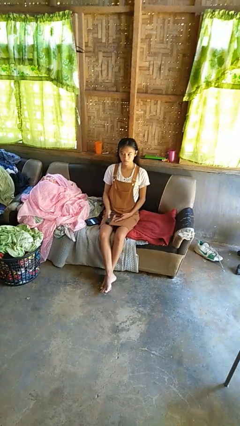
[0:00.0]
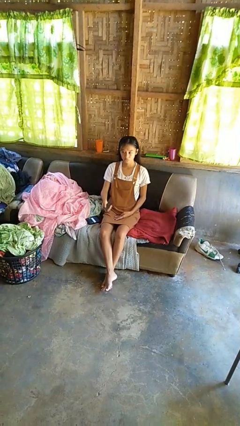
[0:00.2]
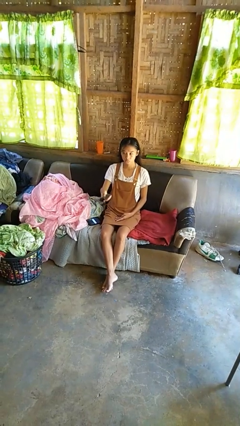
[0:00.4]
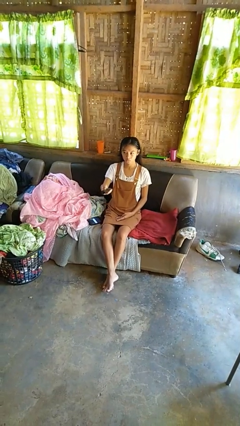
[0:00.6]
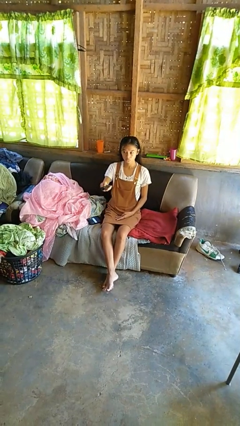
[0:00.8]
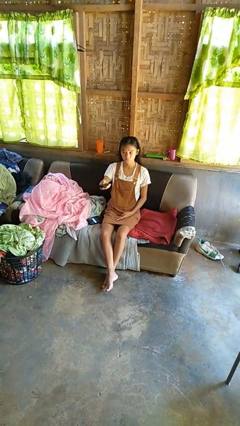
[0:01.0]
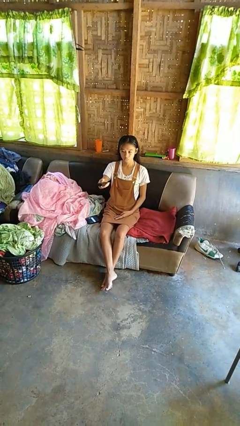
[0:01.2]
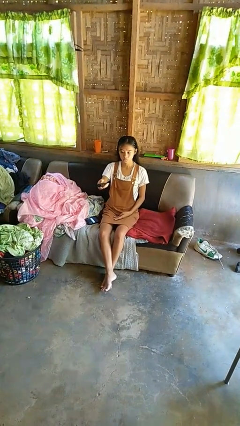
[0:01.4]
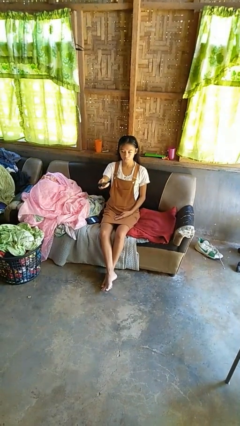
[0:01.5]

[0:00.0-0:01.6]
person uses television remote

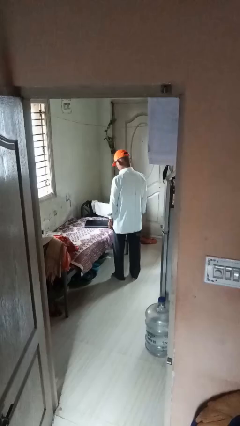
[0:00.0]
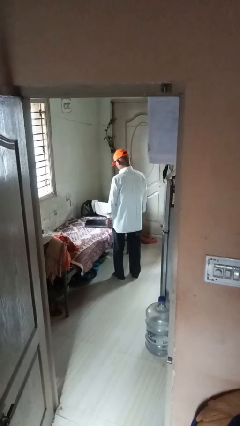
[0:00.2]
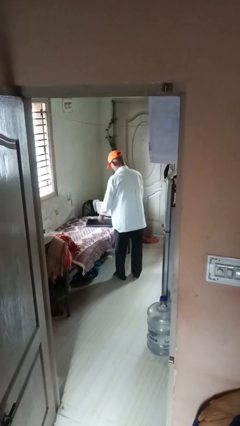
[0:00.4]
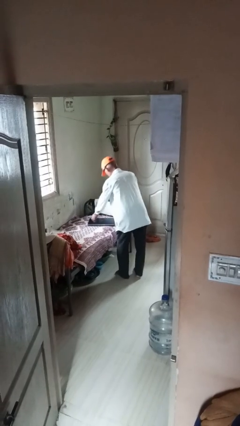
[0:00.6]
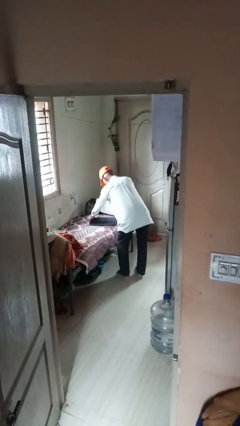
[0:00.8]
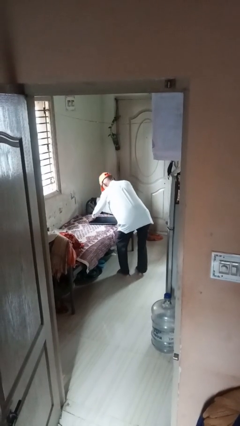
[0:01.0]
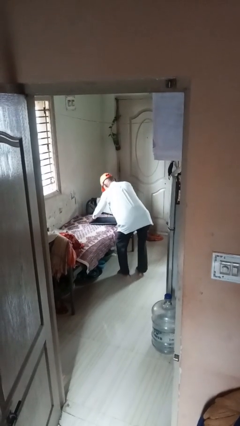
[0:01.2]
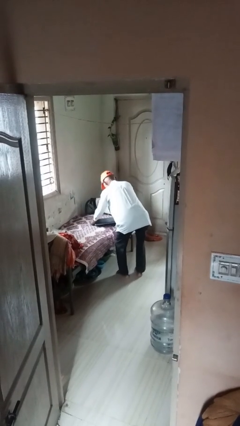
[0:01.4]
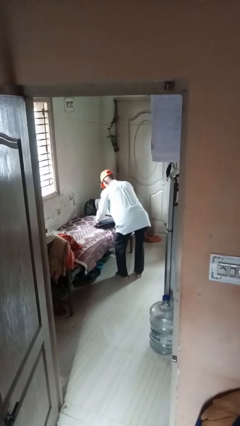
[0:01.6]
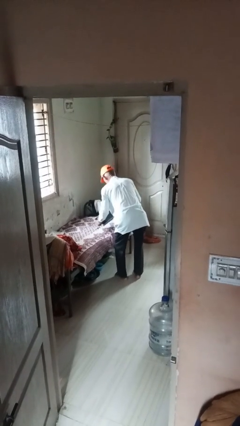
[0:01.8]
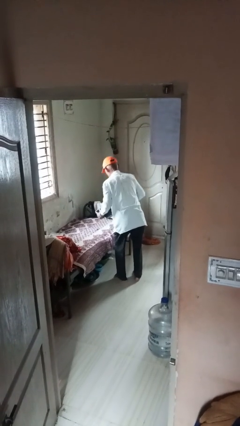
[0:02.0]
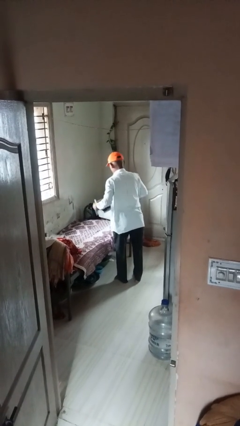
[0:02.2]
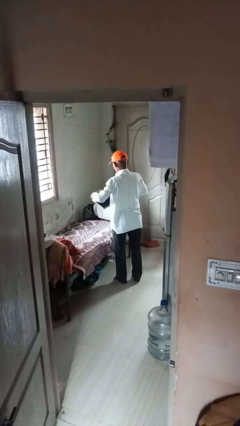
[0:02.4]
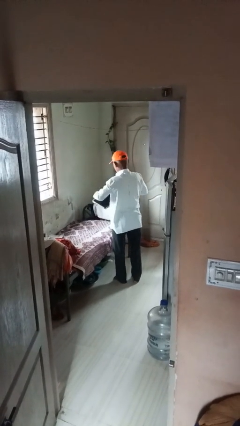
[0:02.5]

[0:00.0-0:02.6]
person picks up object from bed

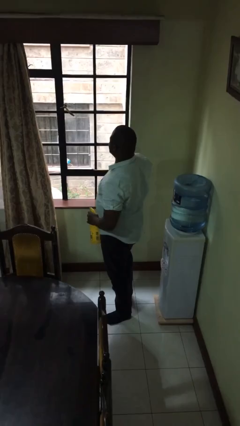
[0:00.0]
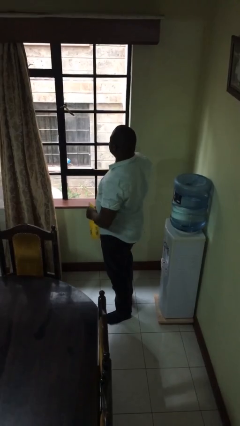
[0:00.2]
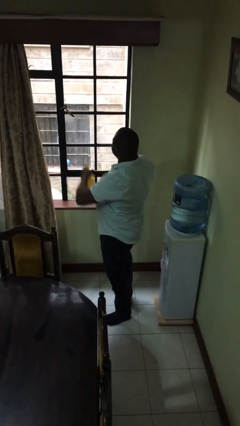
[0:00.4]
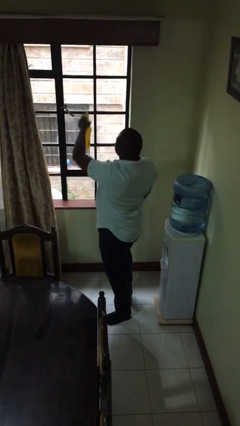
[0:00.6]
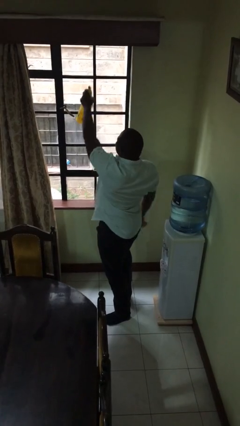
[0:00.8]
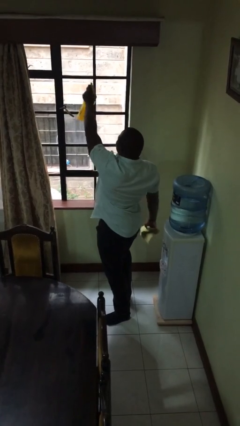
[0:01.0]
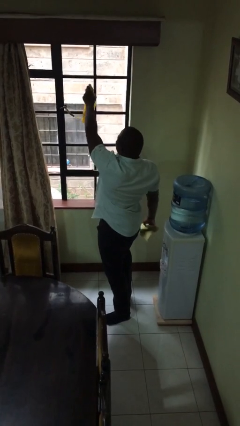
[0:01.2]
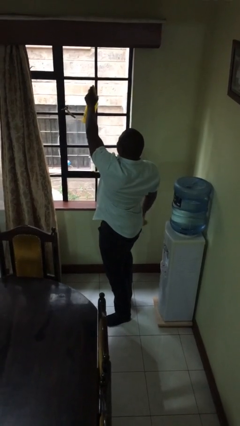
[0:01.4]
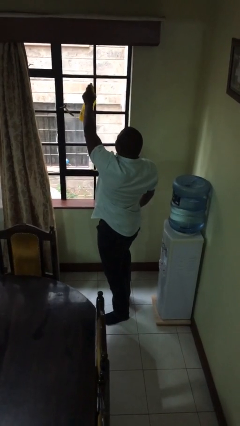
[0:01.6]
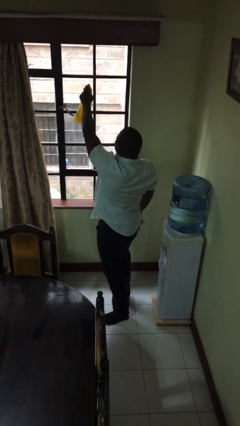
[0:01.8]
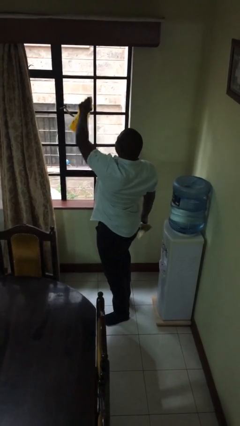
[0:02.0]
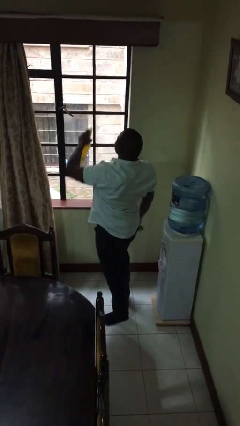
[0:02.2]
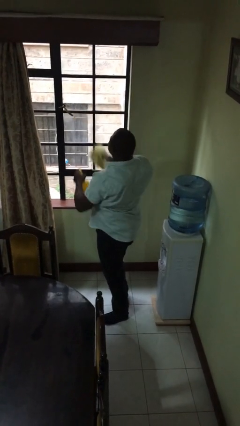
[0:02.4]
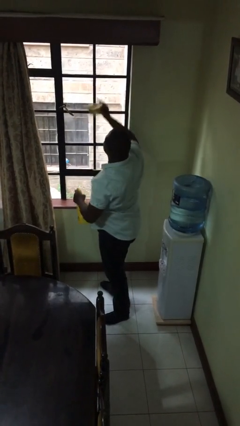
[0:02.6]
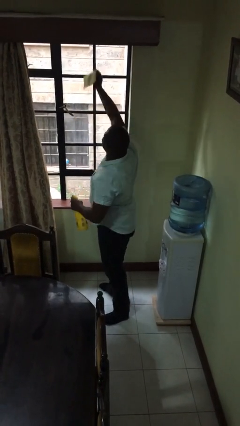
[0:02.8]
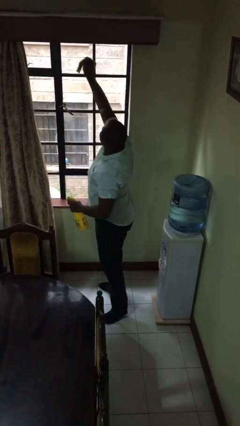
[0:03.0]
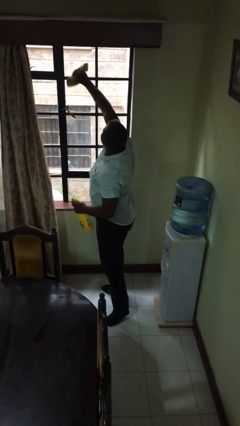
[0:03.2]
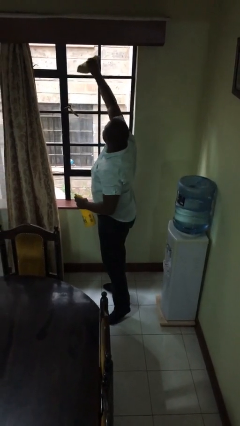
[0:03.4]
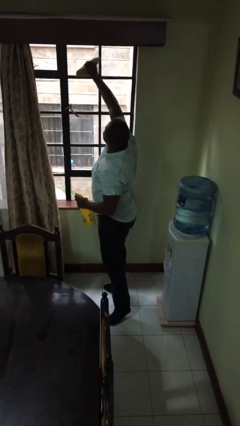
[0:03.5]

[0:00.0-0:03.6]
person sprays from bottle

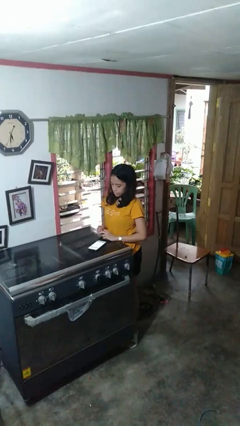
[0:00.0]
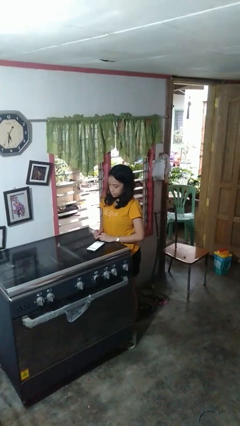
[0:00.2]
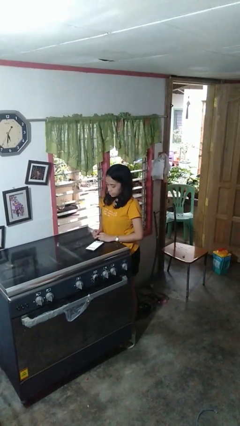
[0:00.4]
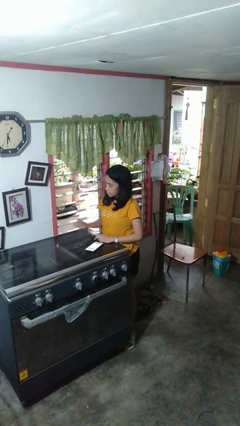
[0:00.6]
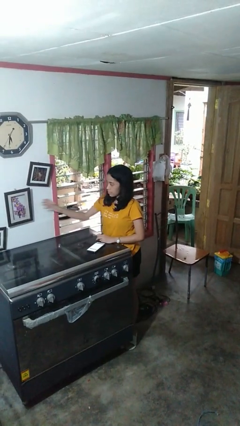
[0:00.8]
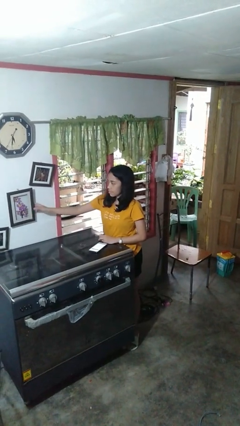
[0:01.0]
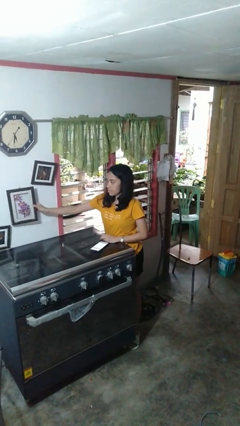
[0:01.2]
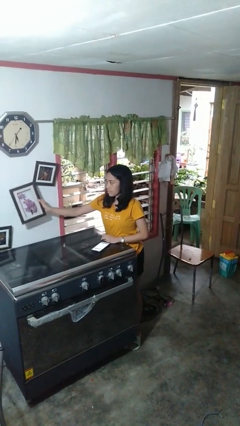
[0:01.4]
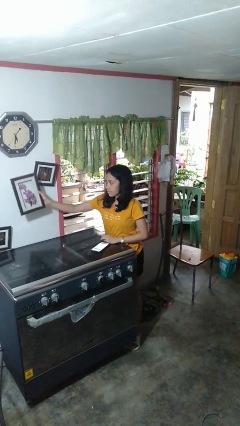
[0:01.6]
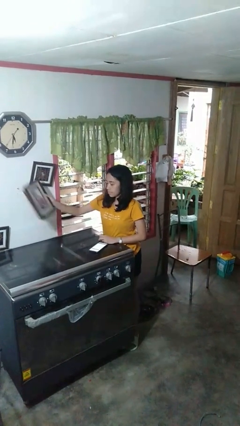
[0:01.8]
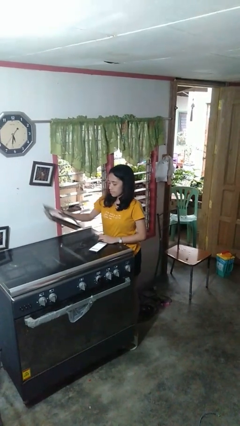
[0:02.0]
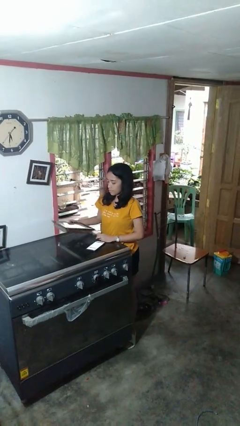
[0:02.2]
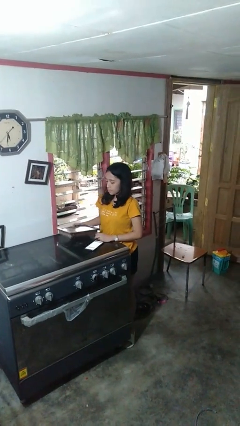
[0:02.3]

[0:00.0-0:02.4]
person takes down picture frame

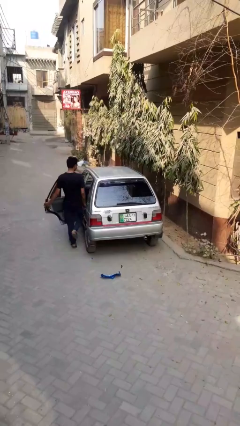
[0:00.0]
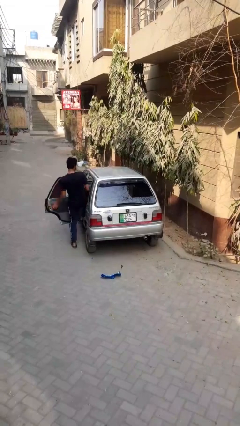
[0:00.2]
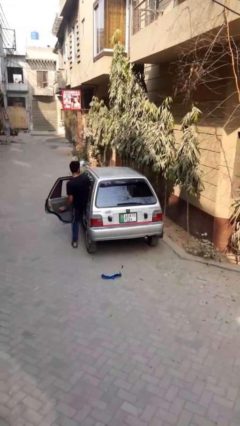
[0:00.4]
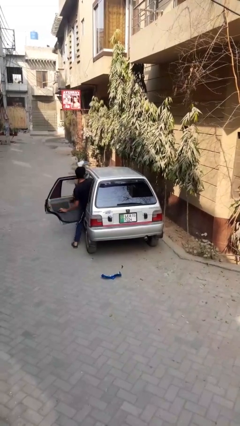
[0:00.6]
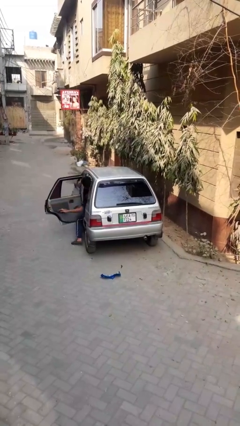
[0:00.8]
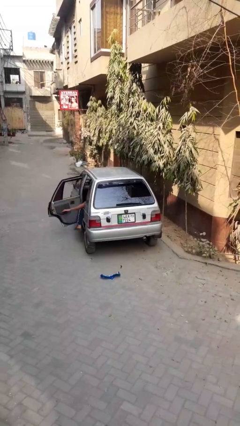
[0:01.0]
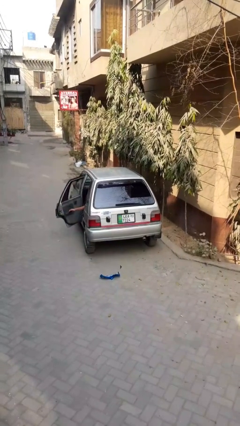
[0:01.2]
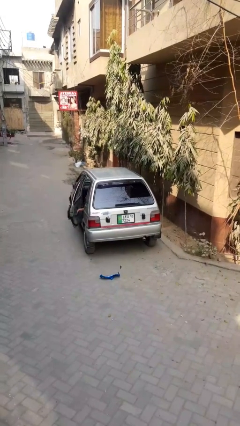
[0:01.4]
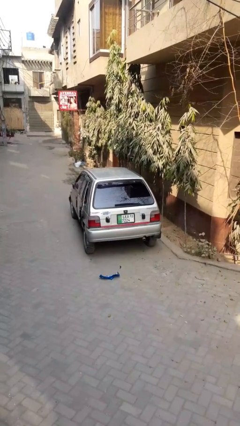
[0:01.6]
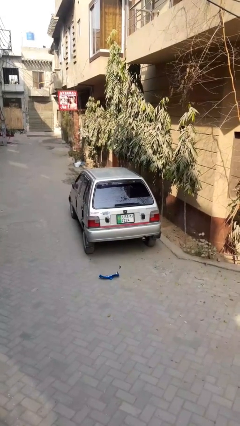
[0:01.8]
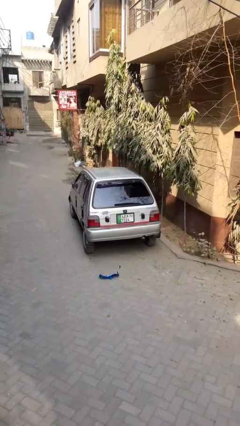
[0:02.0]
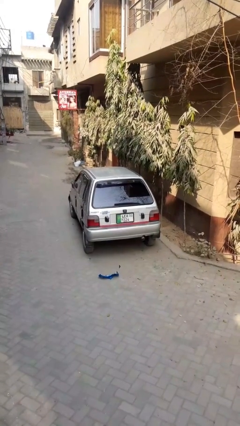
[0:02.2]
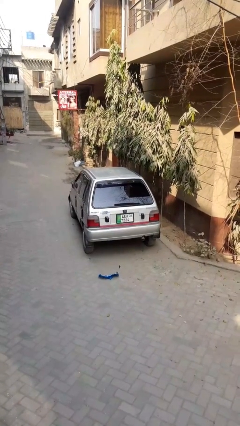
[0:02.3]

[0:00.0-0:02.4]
car picks up person

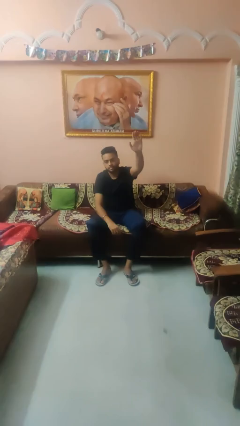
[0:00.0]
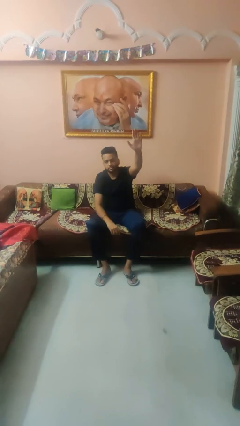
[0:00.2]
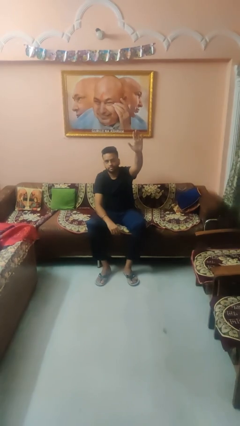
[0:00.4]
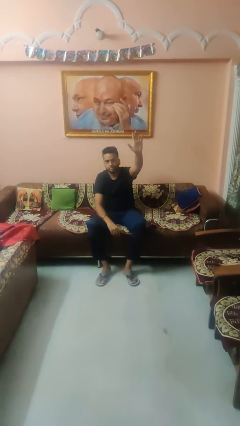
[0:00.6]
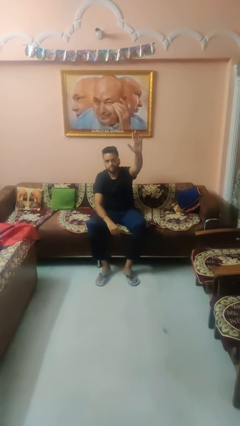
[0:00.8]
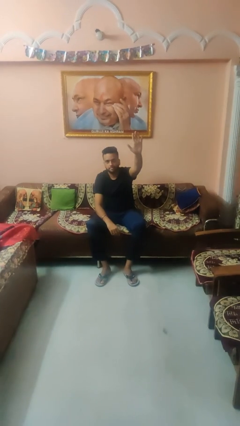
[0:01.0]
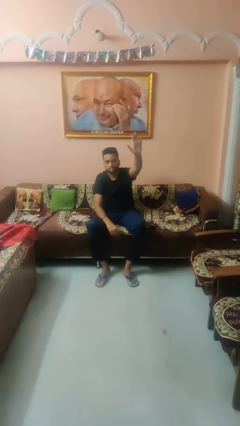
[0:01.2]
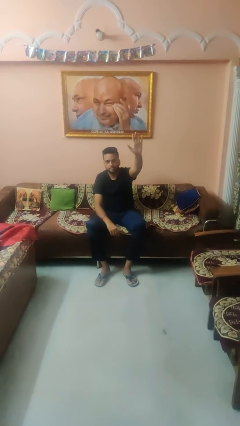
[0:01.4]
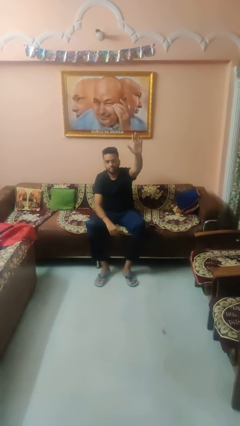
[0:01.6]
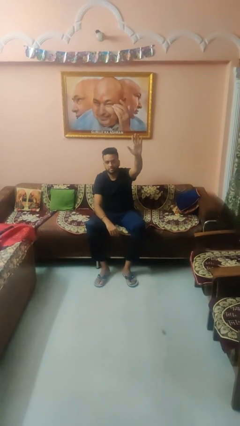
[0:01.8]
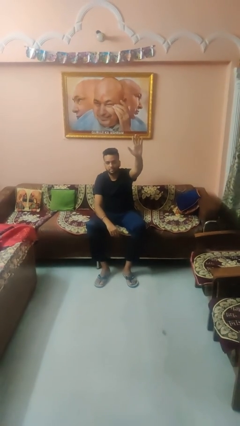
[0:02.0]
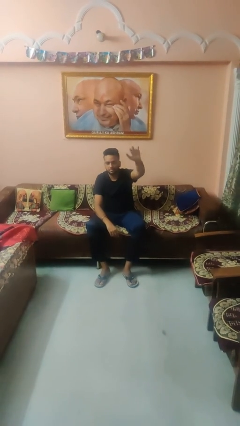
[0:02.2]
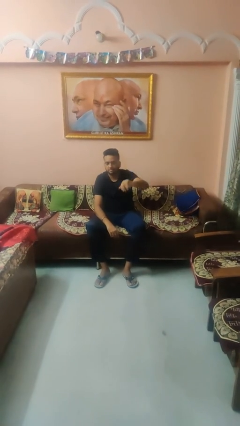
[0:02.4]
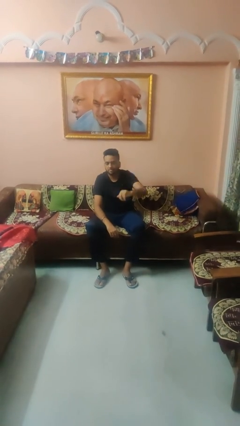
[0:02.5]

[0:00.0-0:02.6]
person gestures number five

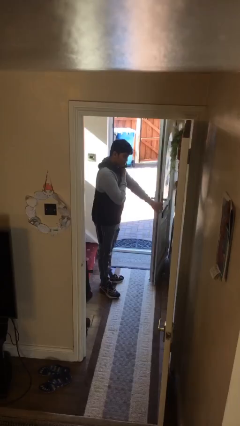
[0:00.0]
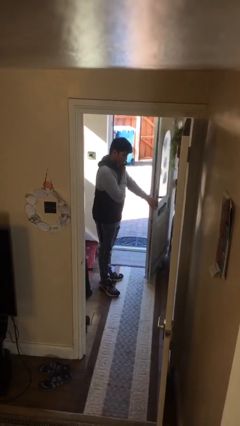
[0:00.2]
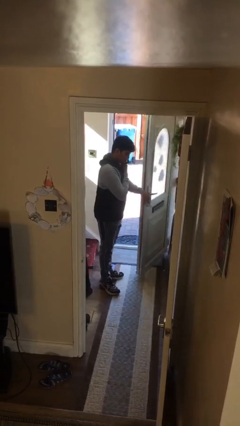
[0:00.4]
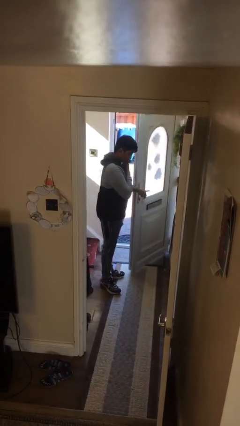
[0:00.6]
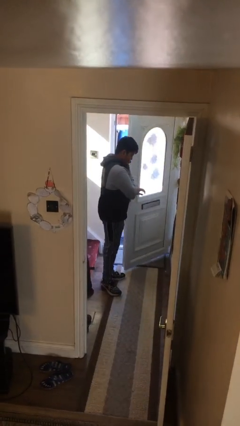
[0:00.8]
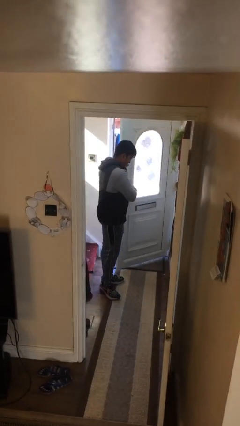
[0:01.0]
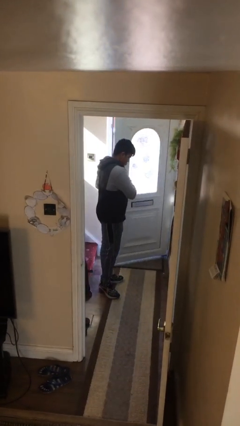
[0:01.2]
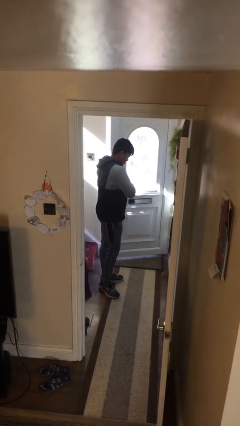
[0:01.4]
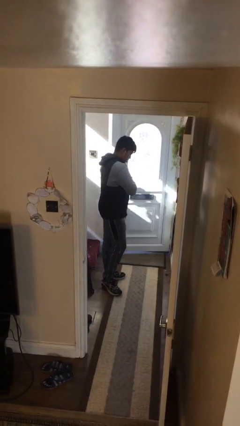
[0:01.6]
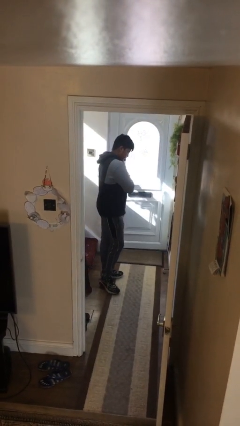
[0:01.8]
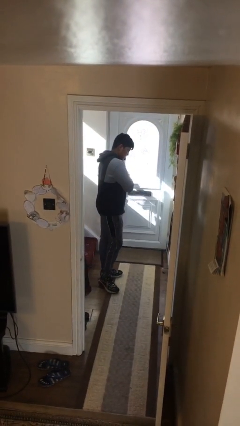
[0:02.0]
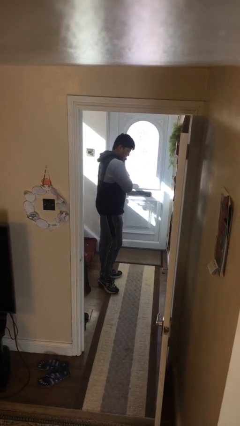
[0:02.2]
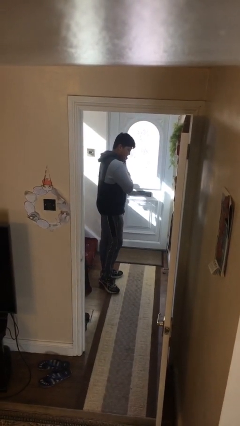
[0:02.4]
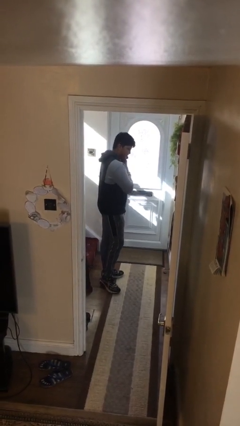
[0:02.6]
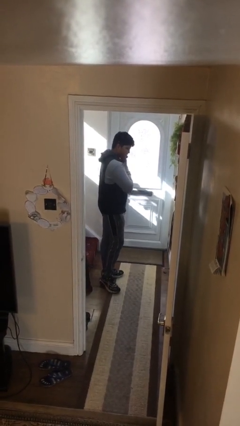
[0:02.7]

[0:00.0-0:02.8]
person closes facility door
